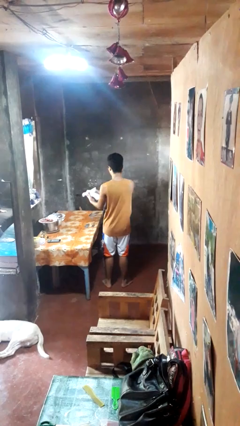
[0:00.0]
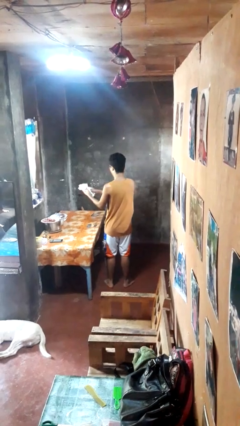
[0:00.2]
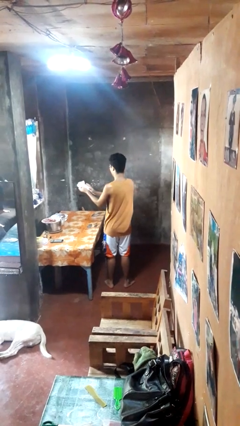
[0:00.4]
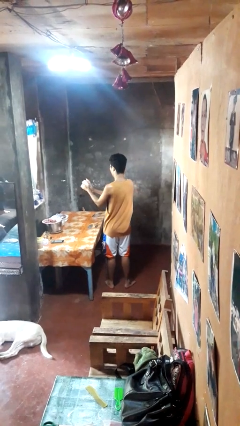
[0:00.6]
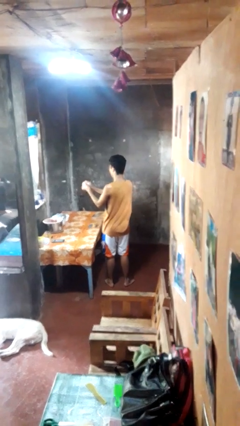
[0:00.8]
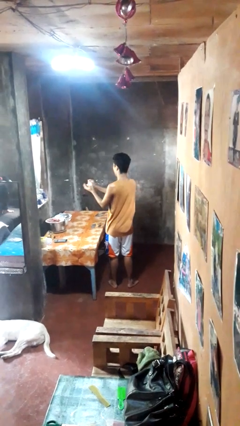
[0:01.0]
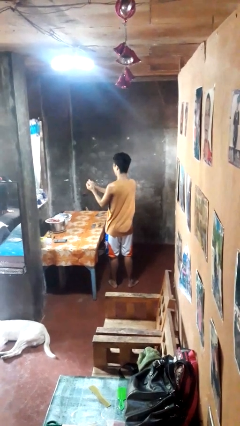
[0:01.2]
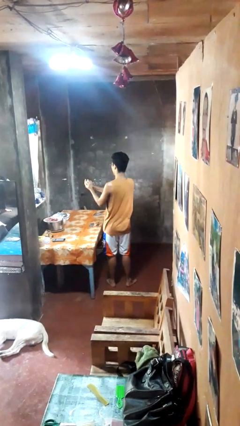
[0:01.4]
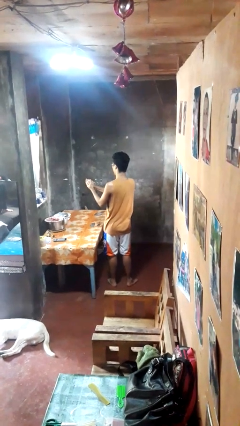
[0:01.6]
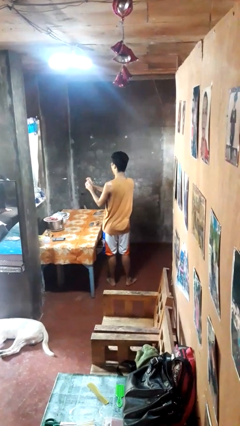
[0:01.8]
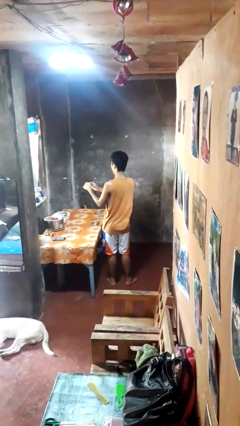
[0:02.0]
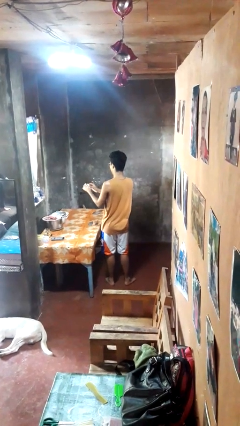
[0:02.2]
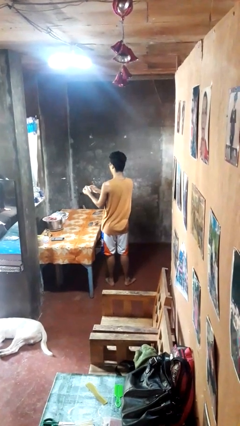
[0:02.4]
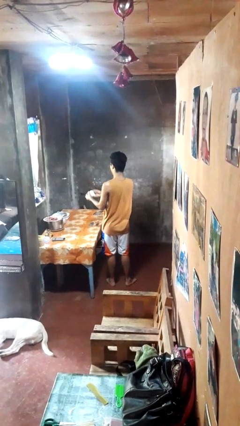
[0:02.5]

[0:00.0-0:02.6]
person crumples paper

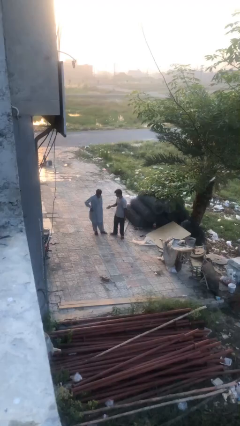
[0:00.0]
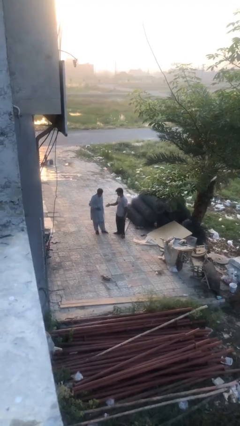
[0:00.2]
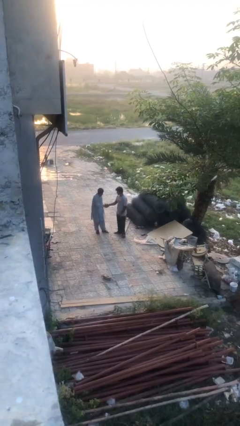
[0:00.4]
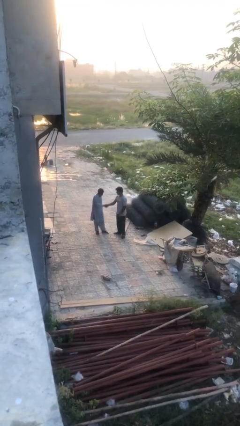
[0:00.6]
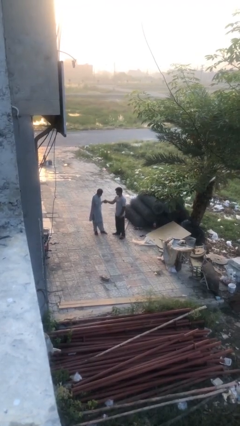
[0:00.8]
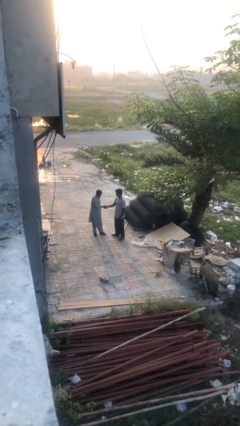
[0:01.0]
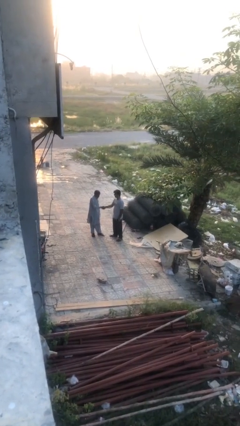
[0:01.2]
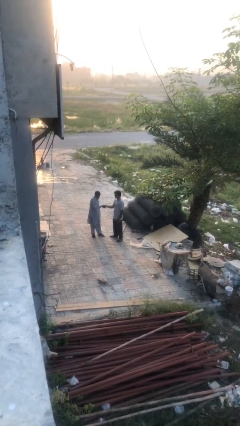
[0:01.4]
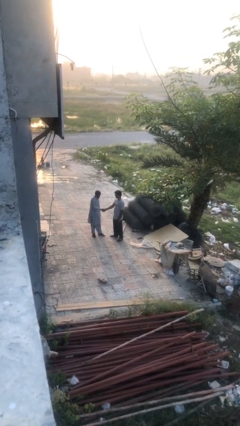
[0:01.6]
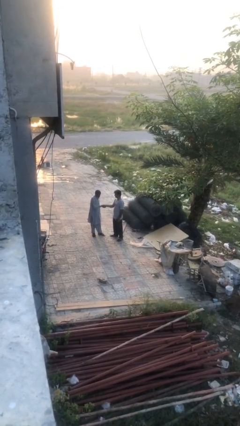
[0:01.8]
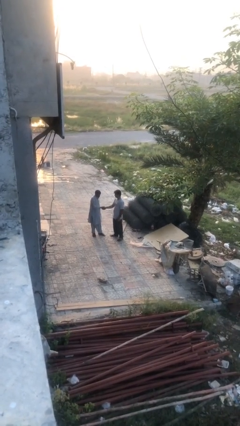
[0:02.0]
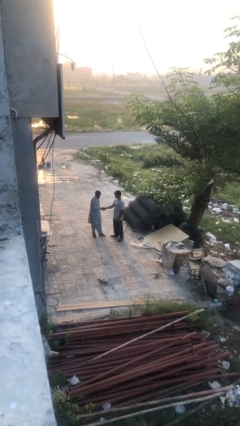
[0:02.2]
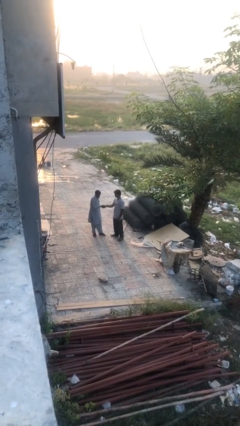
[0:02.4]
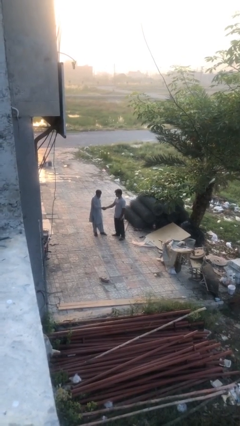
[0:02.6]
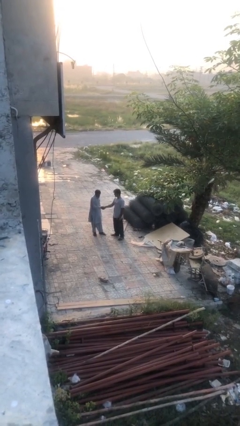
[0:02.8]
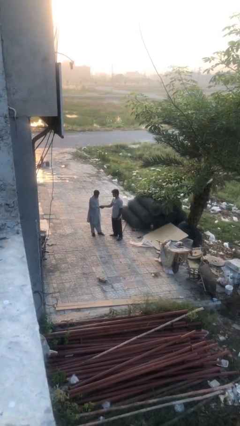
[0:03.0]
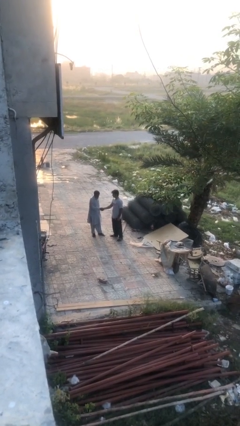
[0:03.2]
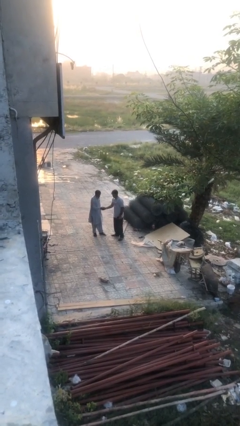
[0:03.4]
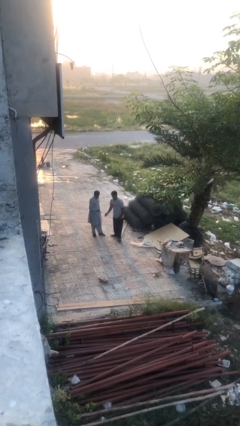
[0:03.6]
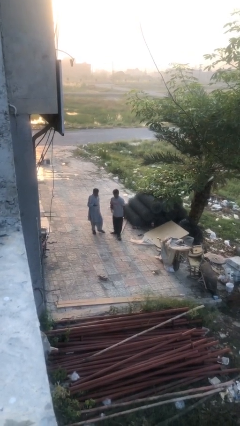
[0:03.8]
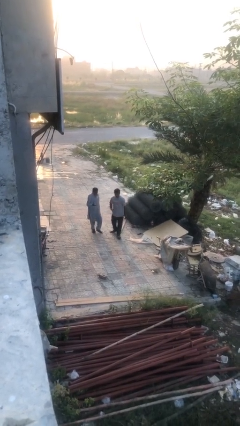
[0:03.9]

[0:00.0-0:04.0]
person shakes hand

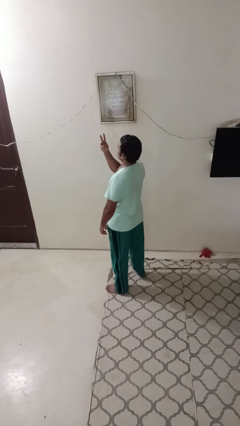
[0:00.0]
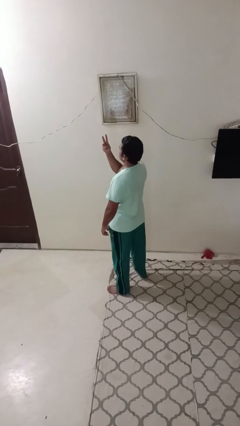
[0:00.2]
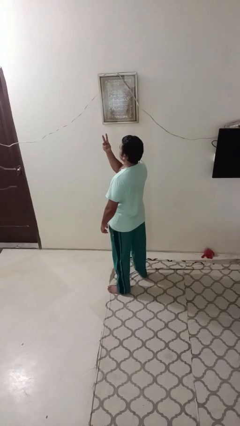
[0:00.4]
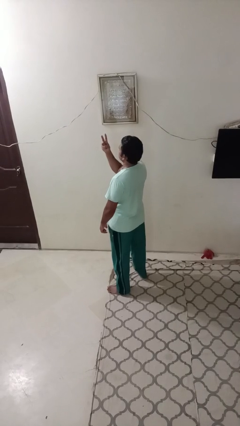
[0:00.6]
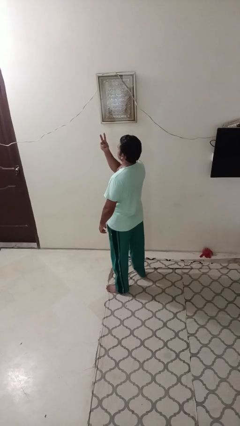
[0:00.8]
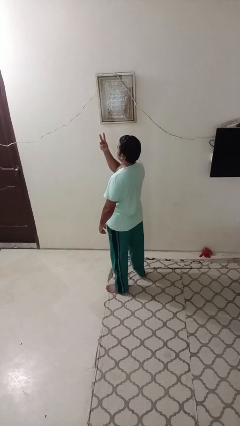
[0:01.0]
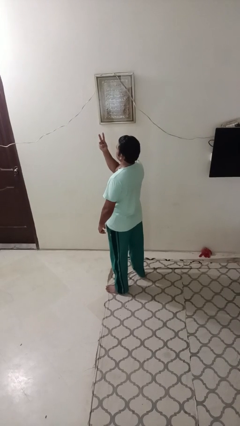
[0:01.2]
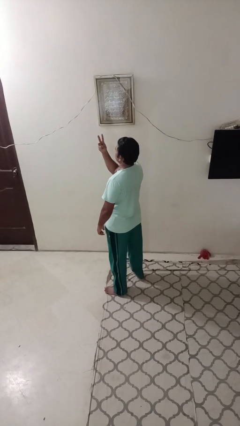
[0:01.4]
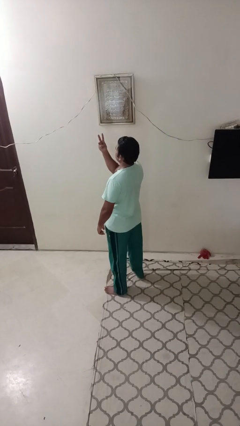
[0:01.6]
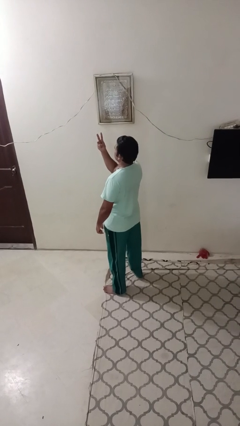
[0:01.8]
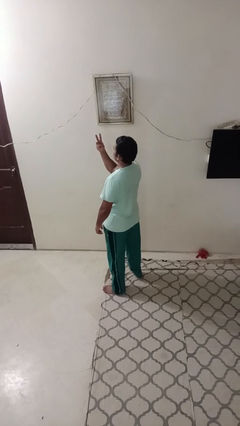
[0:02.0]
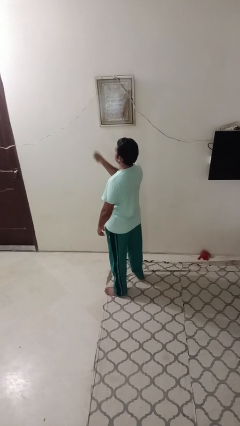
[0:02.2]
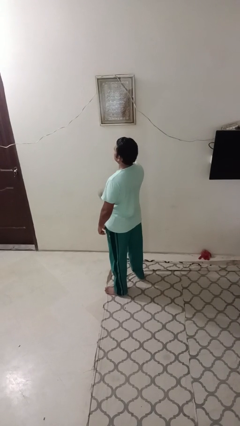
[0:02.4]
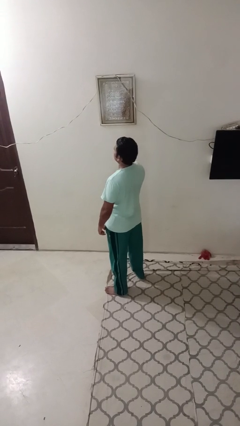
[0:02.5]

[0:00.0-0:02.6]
person gestures peace

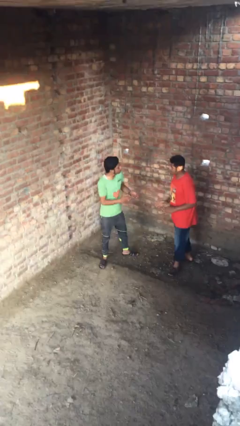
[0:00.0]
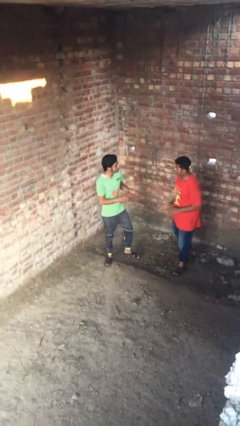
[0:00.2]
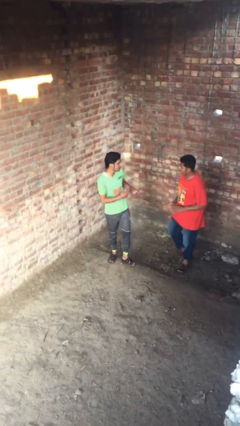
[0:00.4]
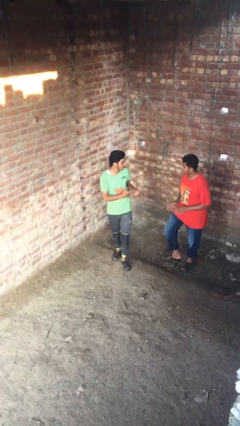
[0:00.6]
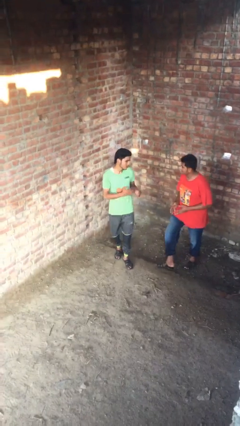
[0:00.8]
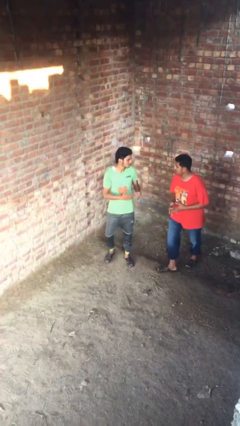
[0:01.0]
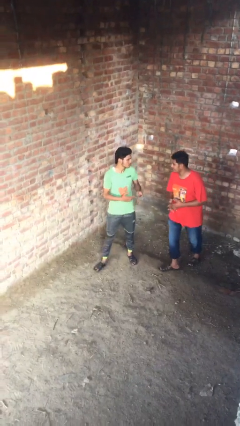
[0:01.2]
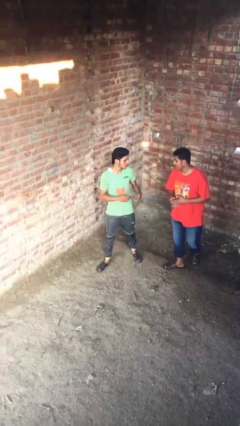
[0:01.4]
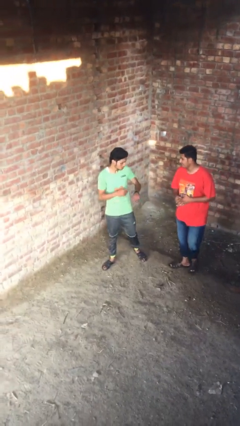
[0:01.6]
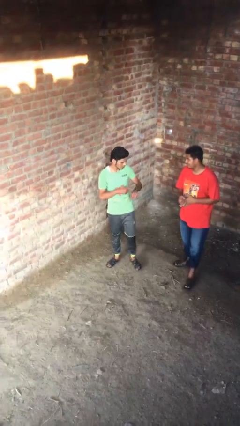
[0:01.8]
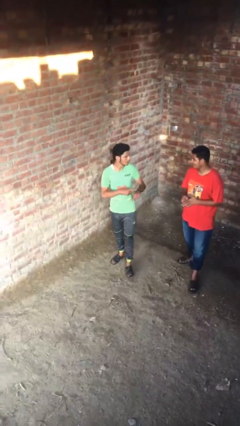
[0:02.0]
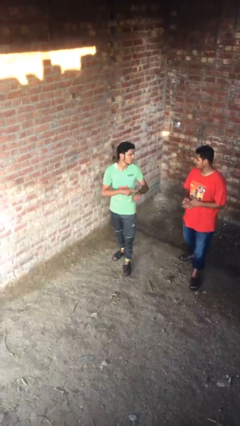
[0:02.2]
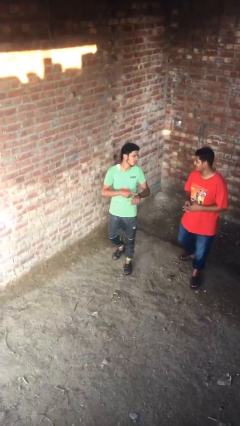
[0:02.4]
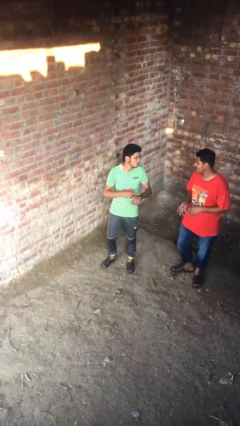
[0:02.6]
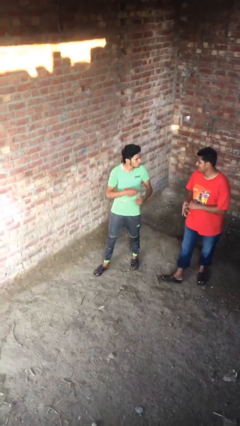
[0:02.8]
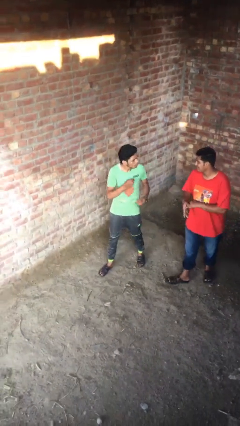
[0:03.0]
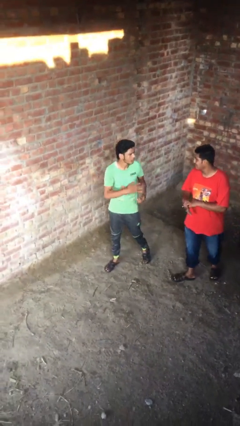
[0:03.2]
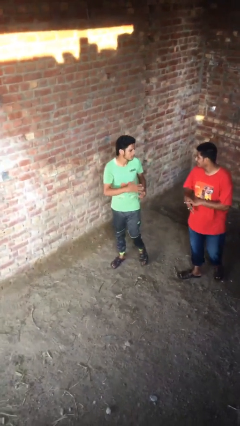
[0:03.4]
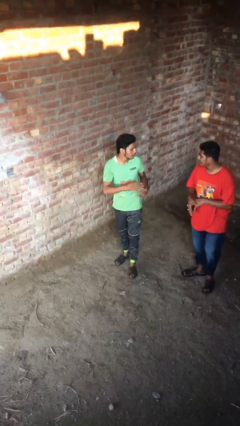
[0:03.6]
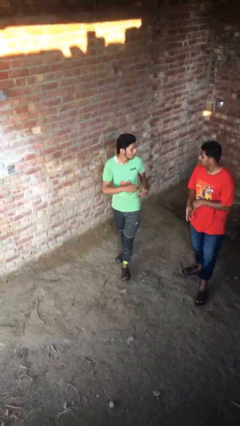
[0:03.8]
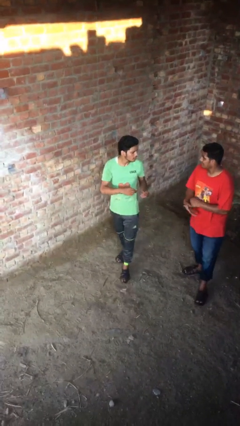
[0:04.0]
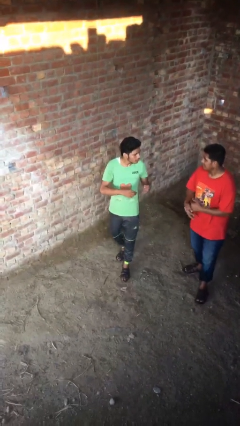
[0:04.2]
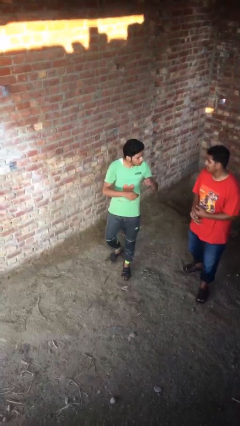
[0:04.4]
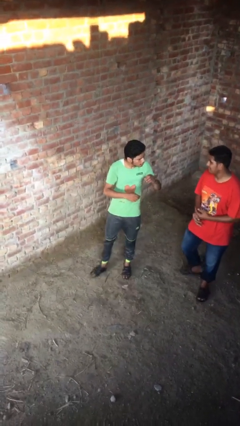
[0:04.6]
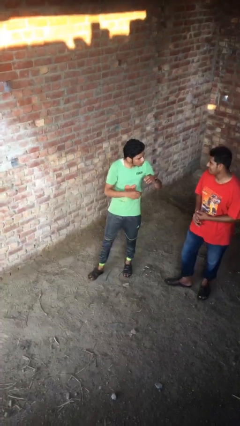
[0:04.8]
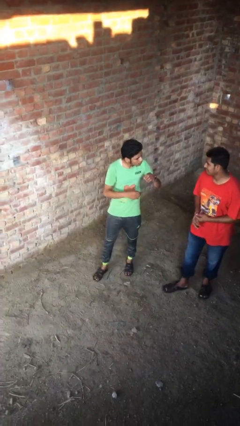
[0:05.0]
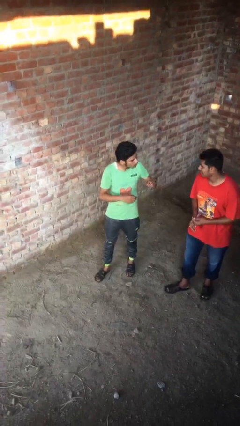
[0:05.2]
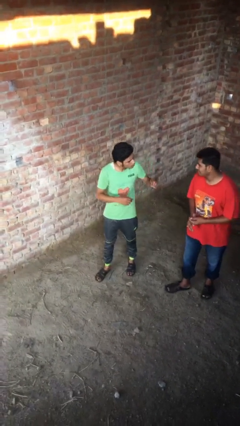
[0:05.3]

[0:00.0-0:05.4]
person talks to person

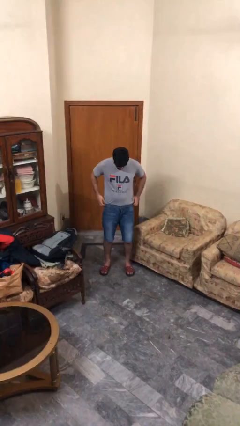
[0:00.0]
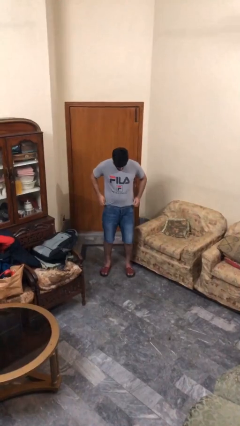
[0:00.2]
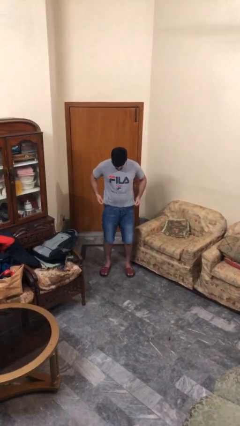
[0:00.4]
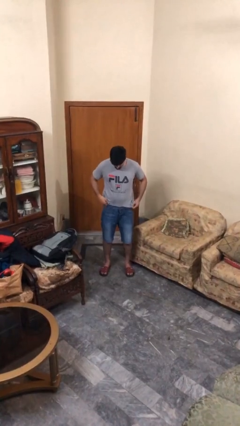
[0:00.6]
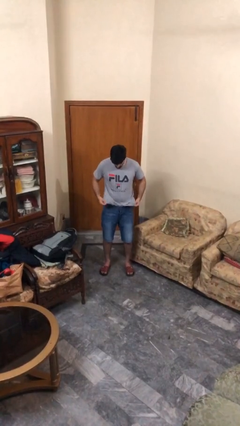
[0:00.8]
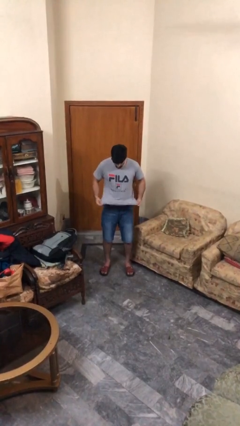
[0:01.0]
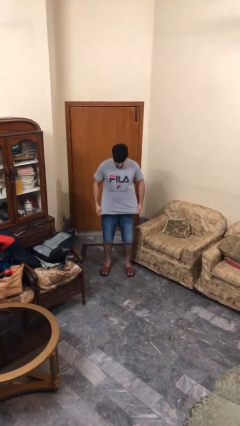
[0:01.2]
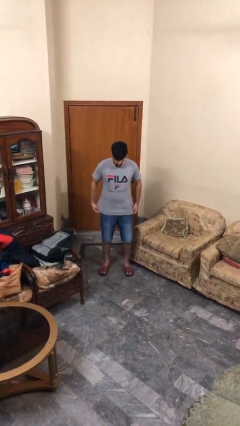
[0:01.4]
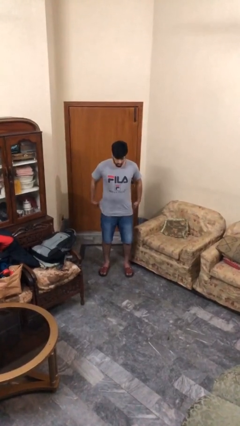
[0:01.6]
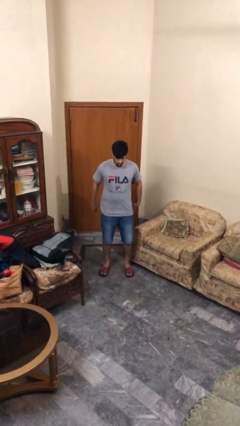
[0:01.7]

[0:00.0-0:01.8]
person untucks shirt

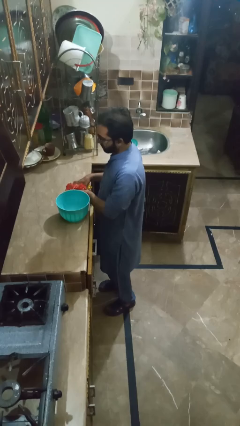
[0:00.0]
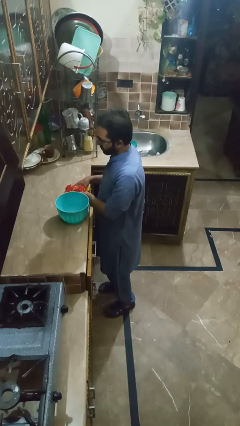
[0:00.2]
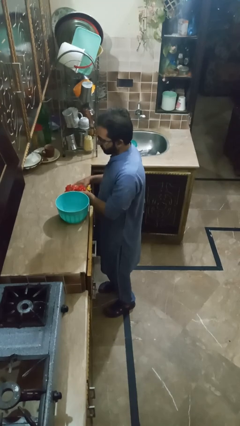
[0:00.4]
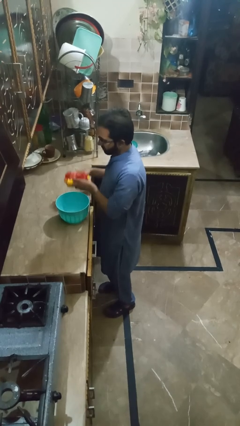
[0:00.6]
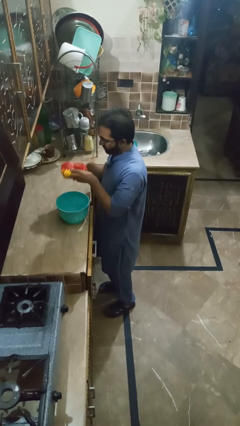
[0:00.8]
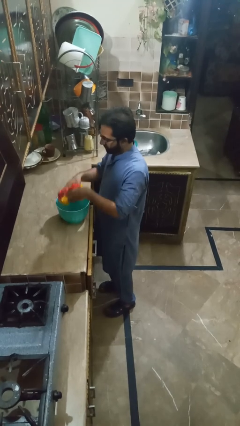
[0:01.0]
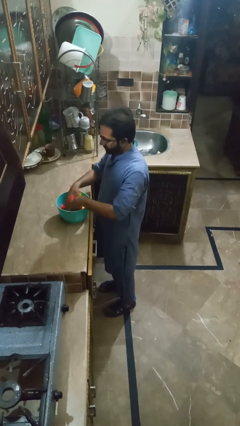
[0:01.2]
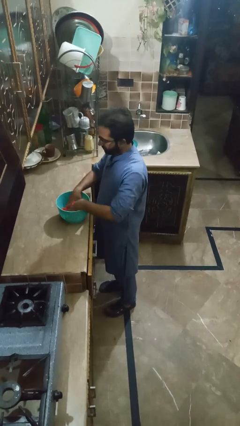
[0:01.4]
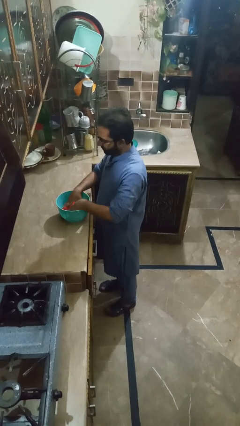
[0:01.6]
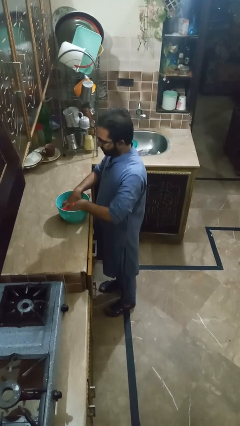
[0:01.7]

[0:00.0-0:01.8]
person pours into bowl
